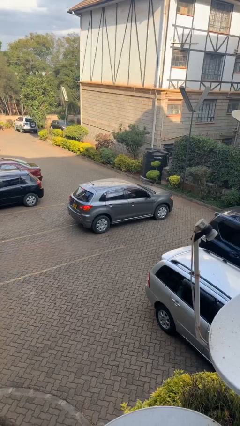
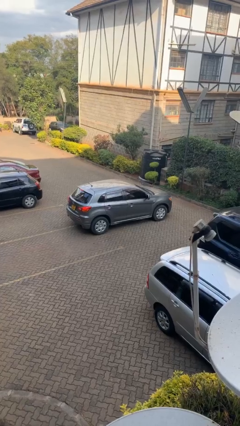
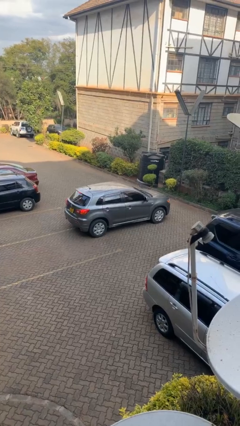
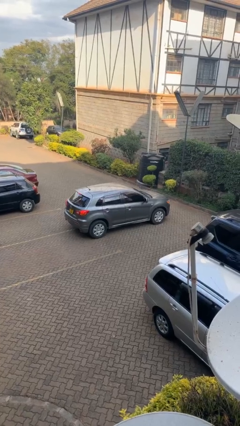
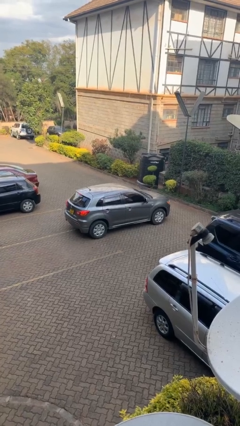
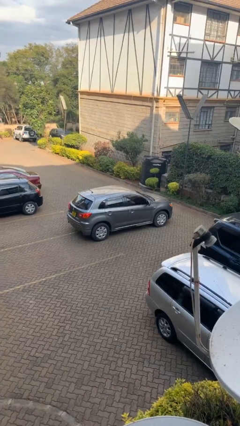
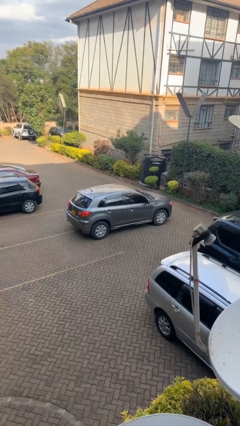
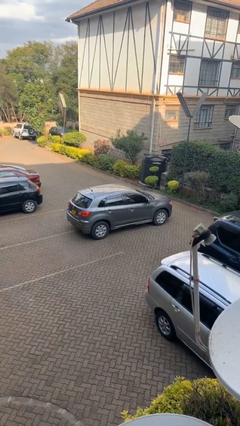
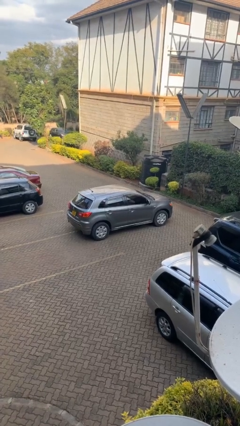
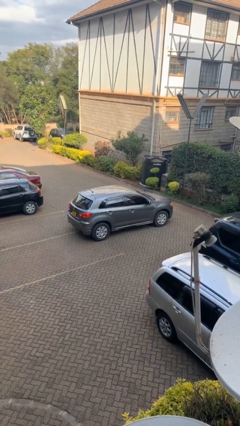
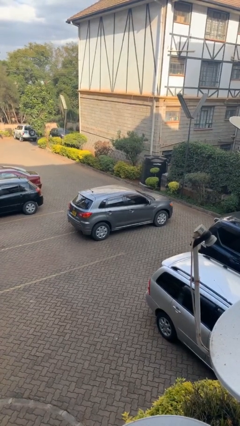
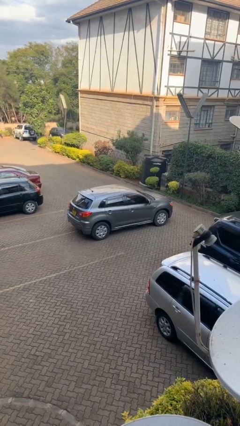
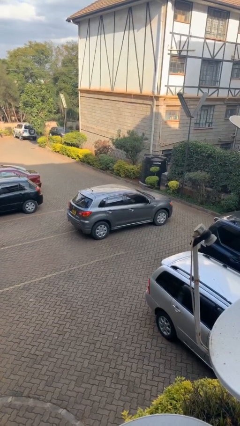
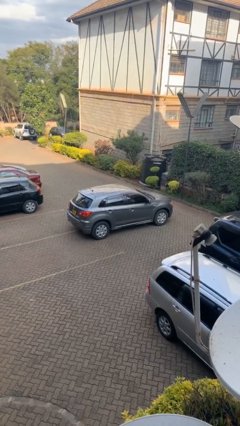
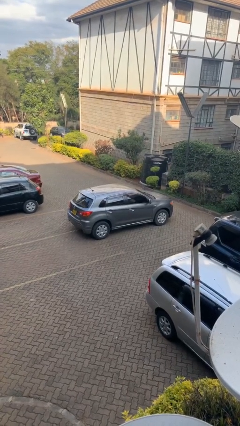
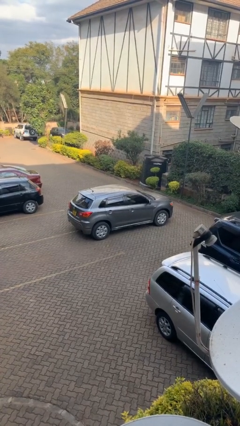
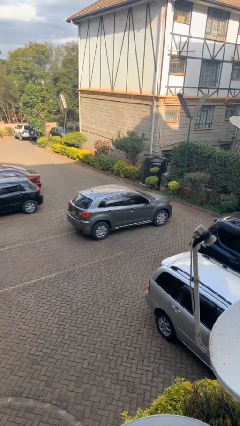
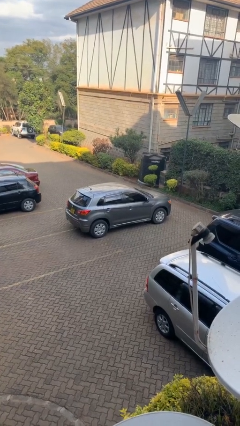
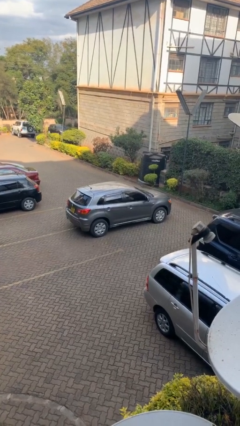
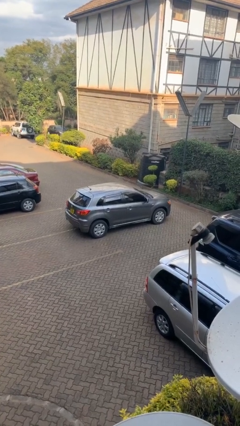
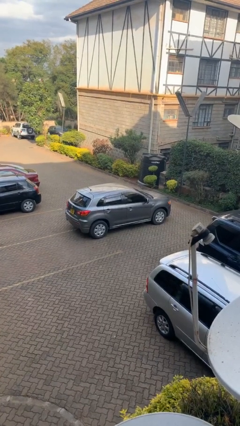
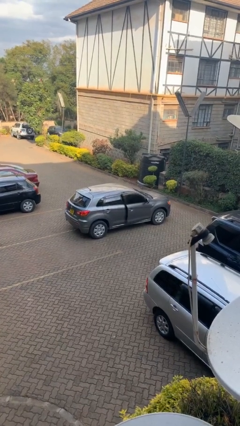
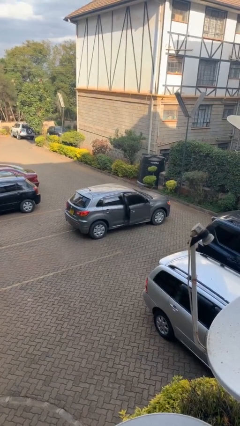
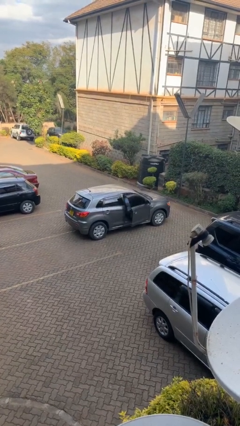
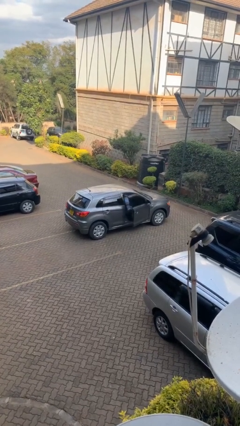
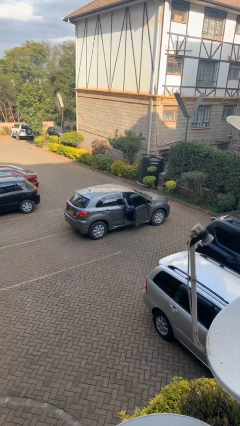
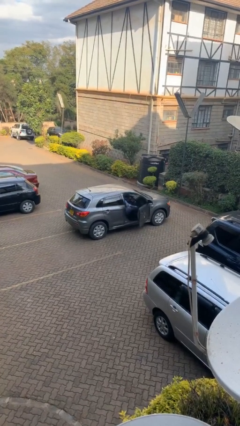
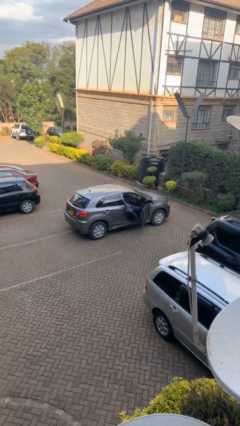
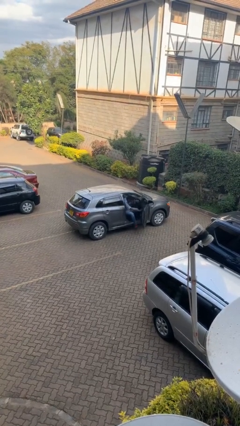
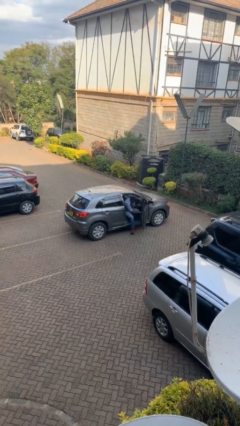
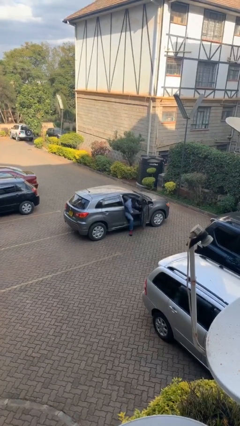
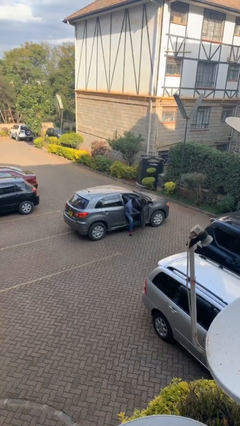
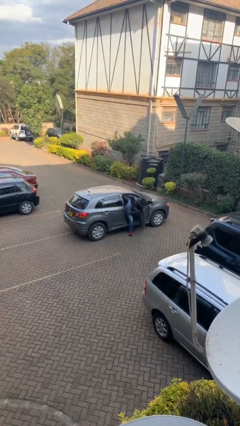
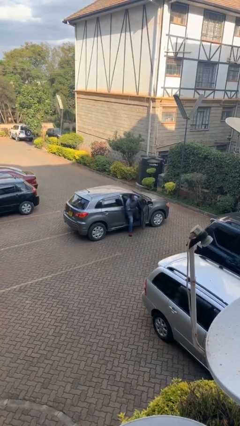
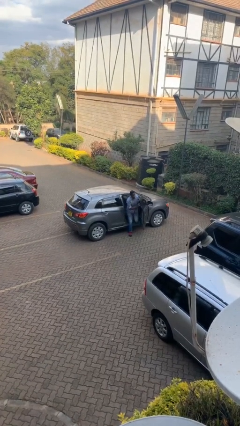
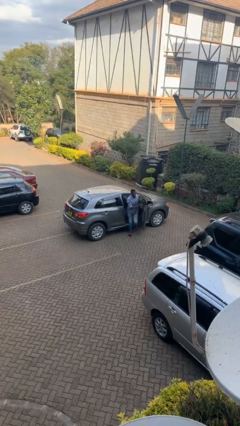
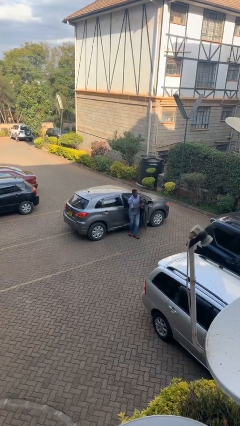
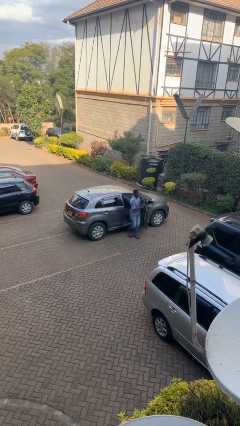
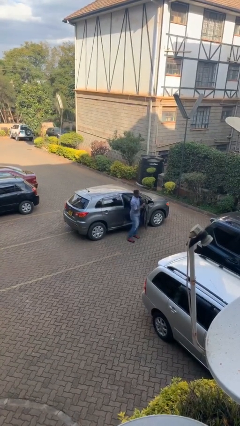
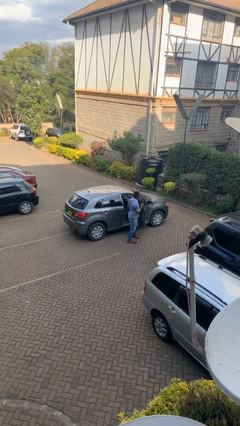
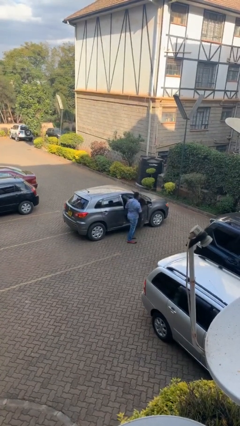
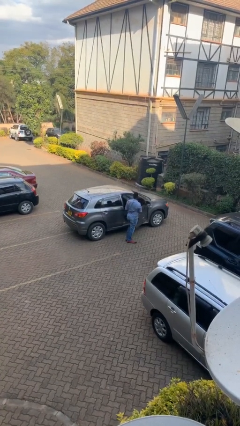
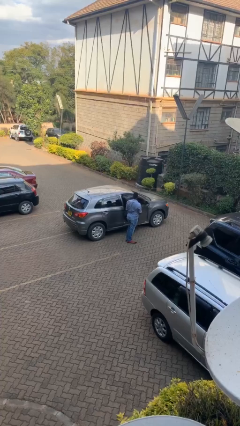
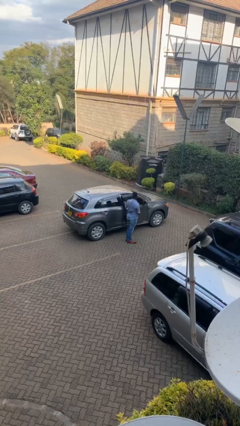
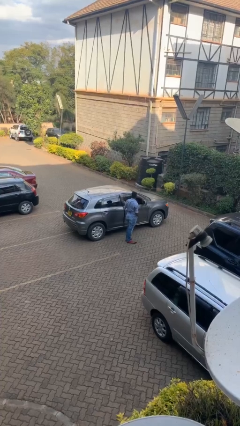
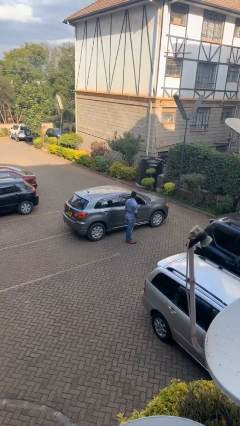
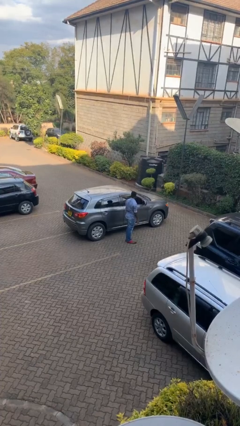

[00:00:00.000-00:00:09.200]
car drops off person

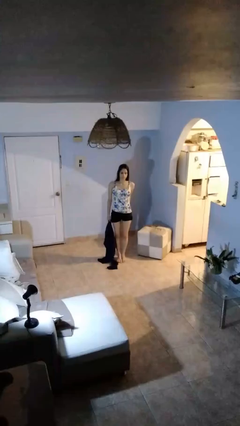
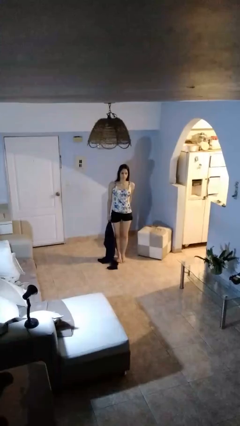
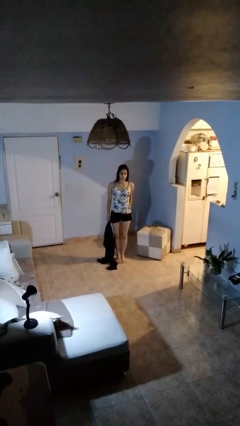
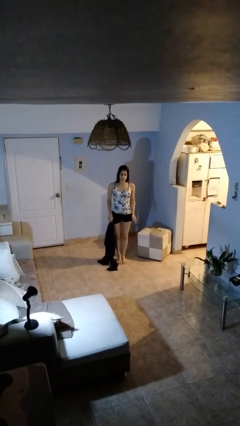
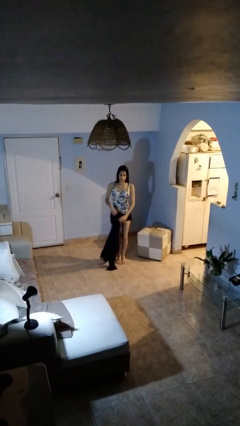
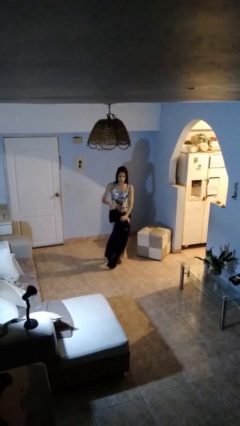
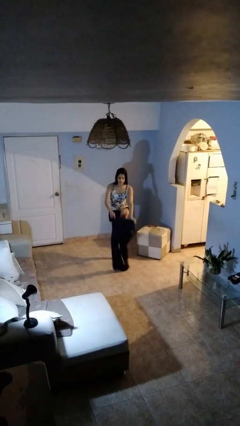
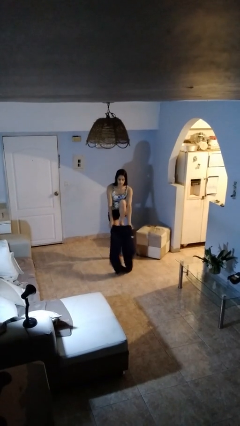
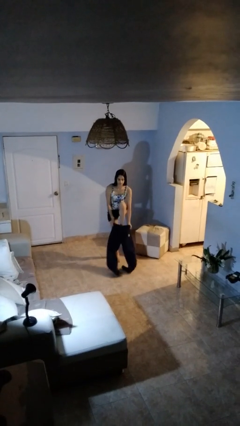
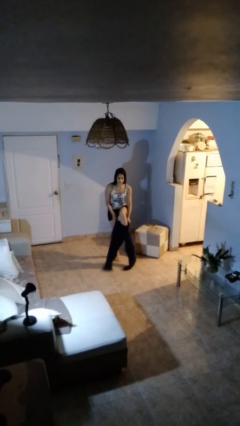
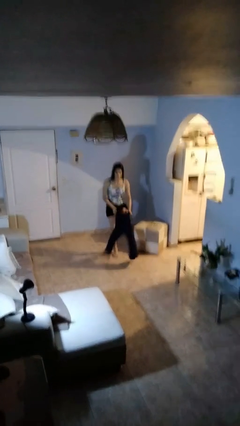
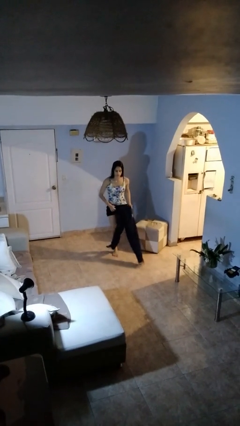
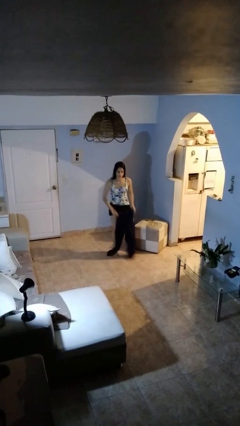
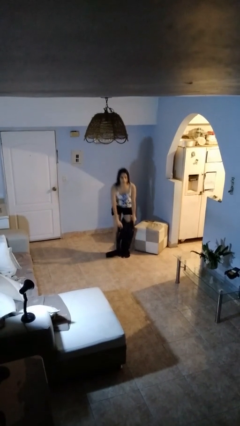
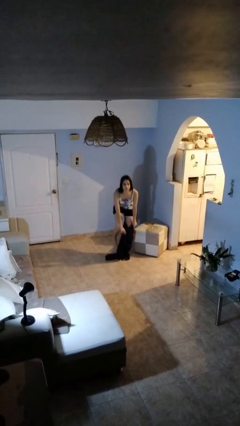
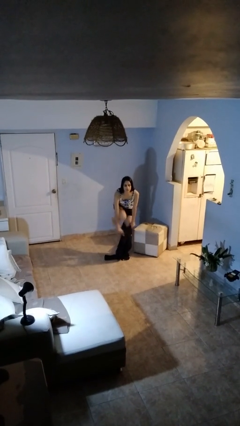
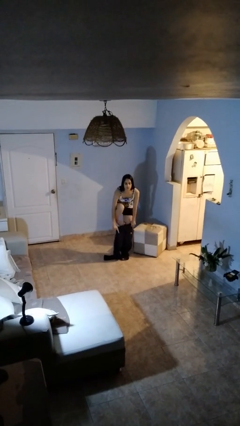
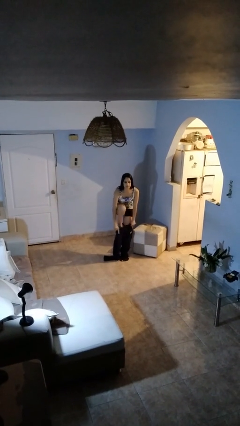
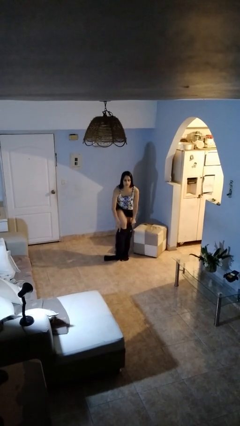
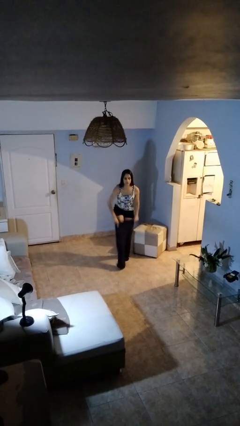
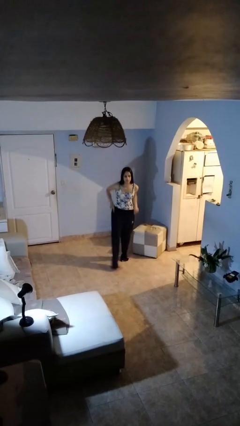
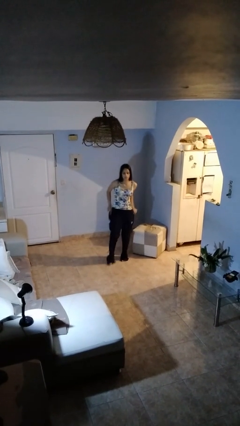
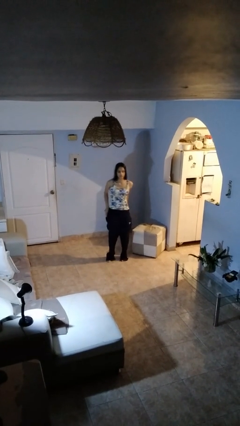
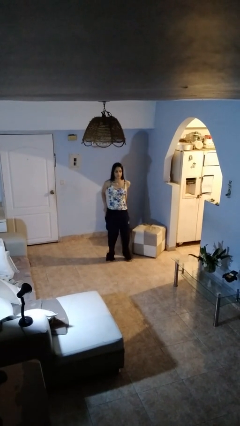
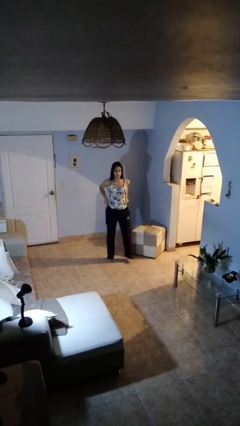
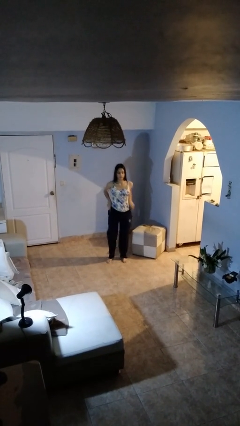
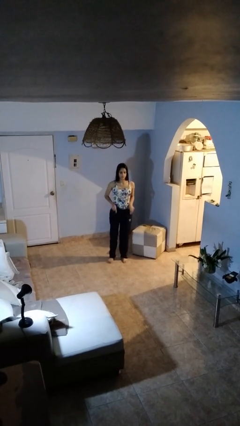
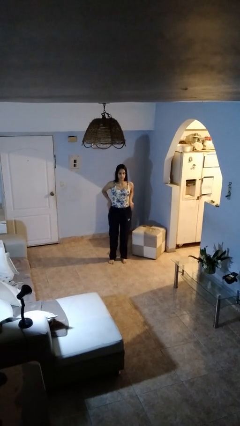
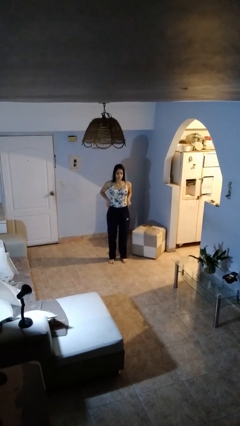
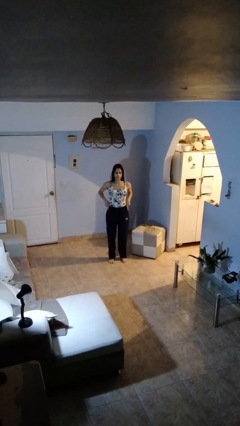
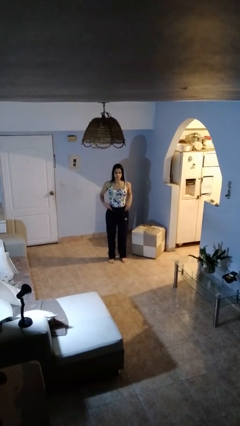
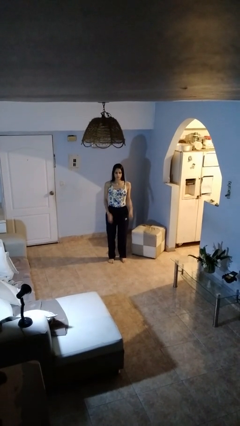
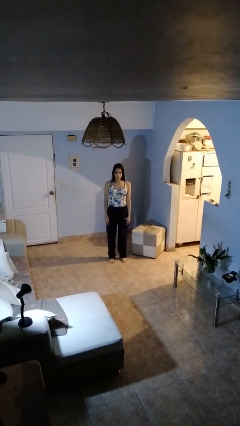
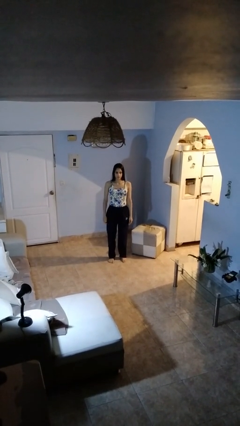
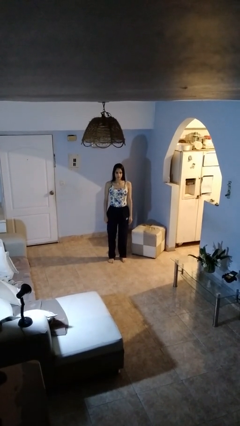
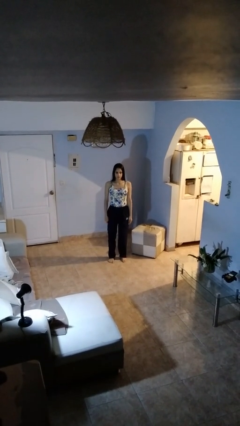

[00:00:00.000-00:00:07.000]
person takes off pants

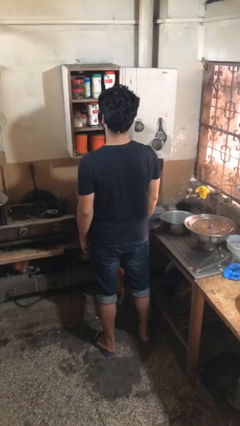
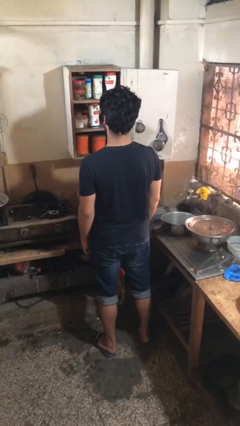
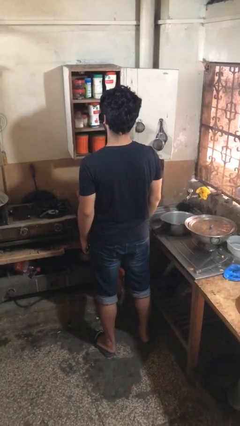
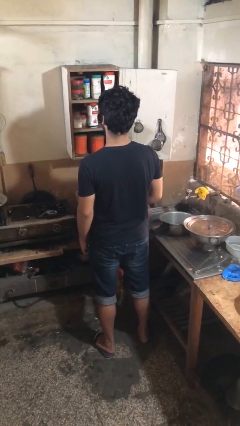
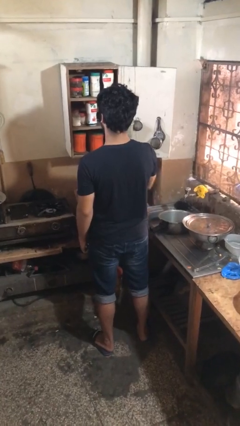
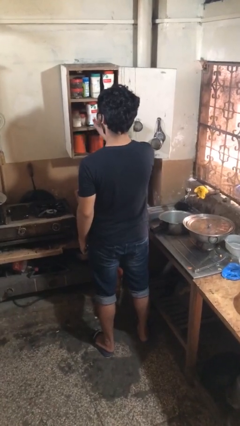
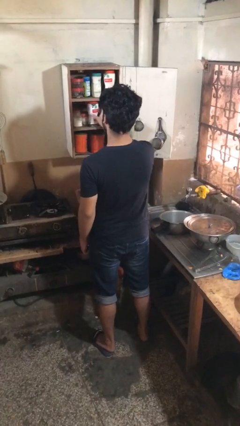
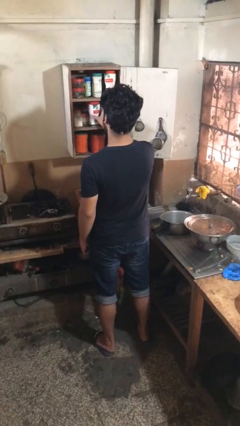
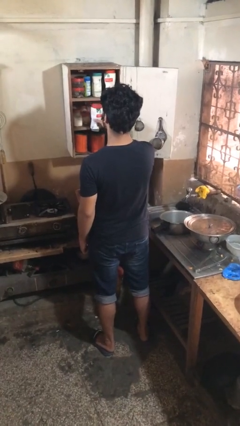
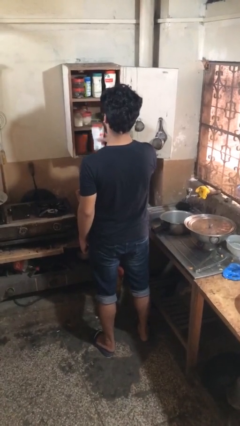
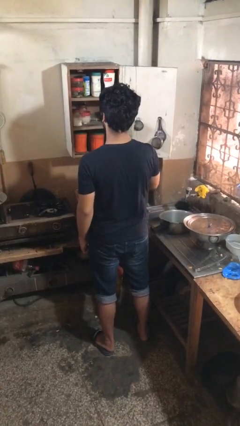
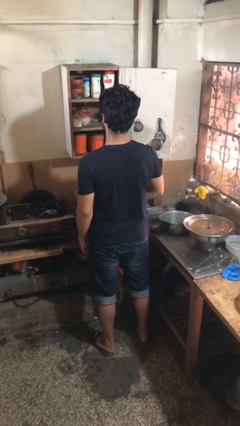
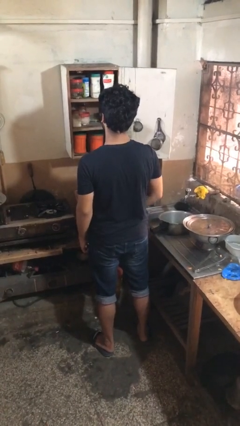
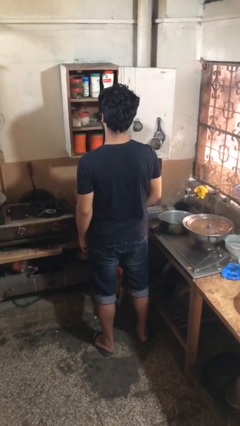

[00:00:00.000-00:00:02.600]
person picks up object from cabinet
